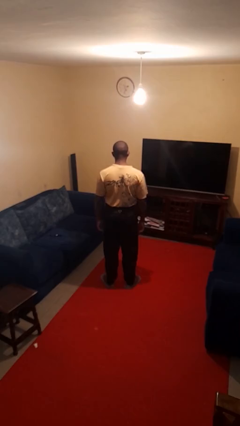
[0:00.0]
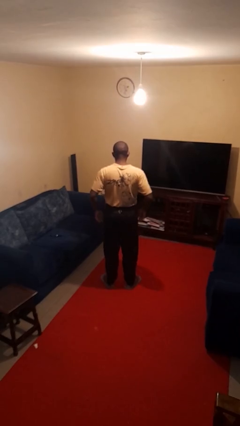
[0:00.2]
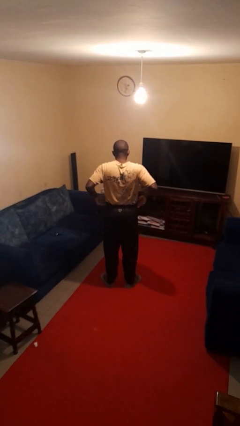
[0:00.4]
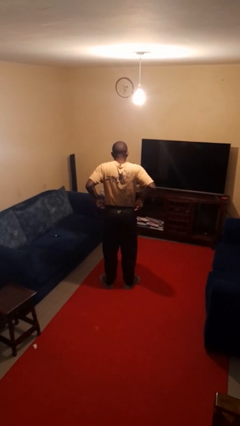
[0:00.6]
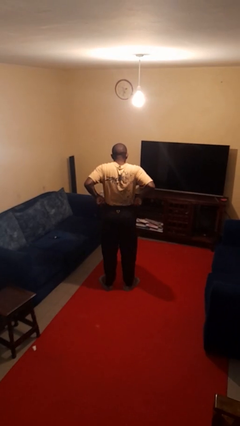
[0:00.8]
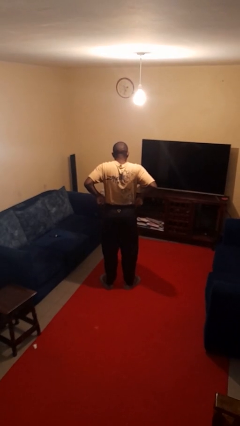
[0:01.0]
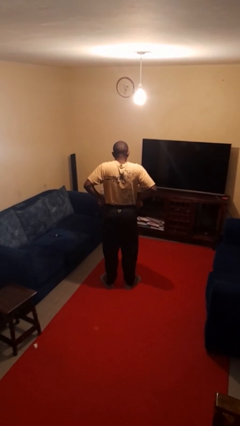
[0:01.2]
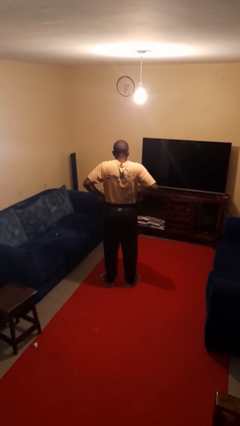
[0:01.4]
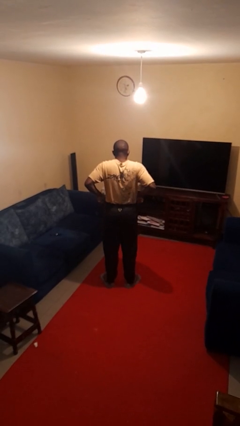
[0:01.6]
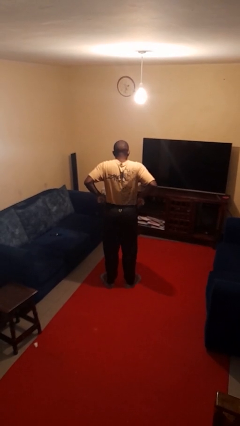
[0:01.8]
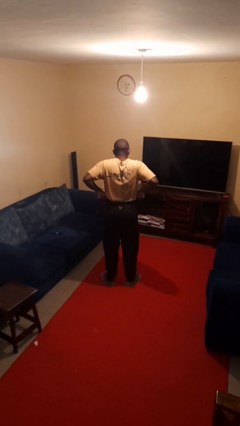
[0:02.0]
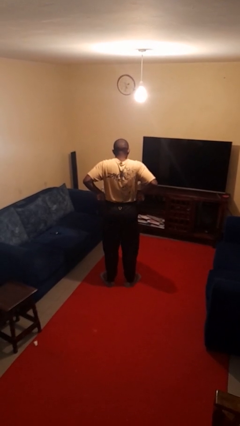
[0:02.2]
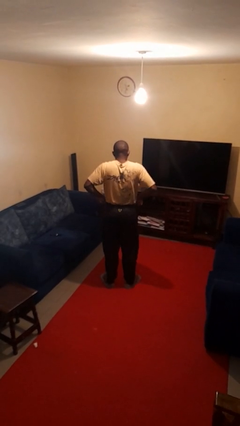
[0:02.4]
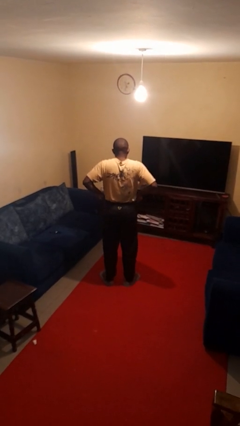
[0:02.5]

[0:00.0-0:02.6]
person hikes up pants

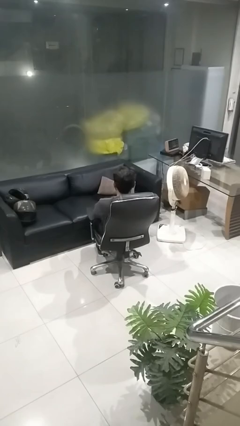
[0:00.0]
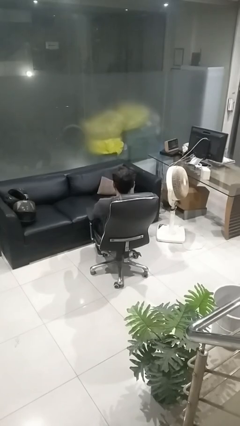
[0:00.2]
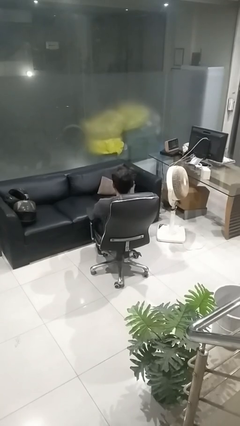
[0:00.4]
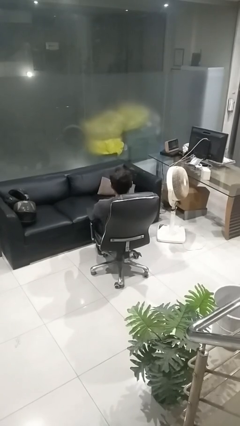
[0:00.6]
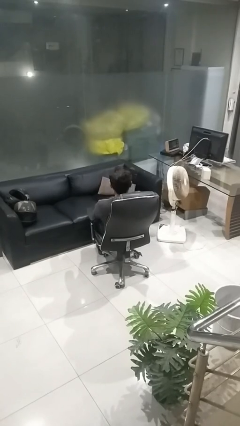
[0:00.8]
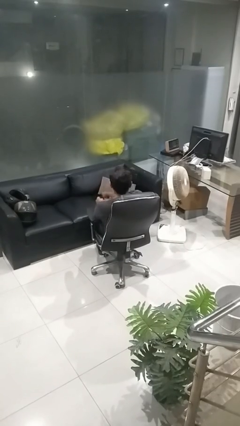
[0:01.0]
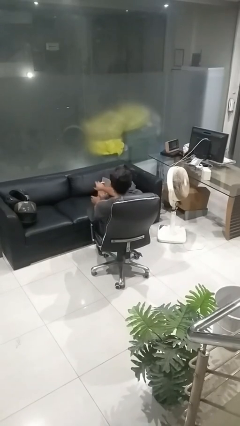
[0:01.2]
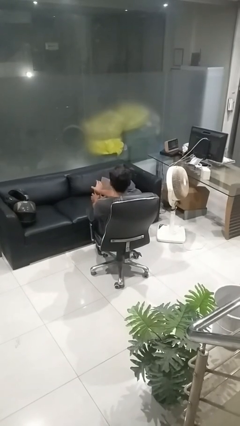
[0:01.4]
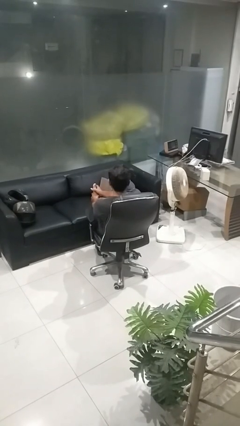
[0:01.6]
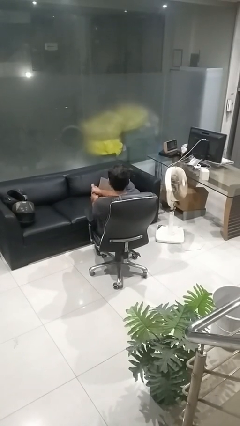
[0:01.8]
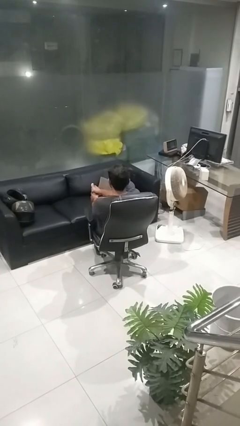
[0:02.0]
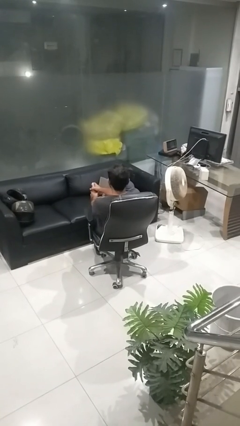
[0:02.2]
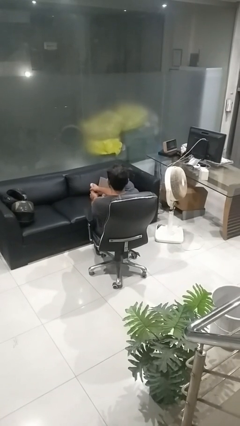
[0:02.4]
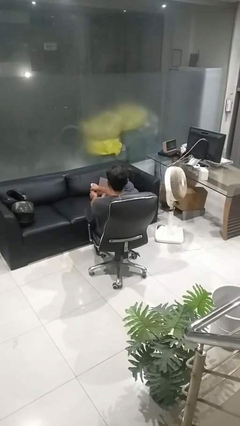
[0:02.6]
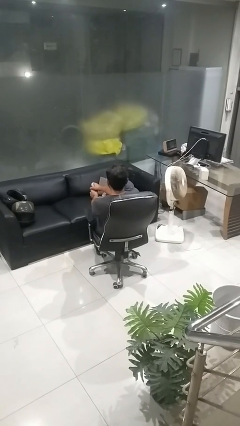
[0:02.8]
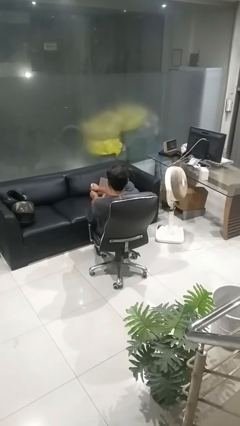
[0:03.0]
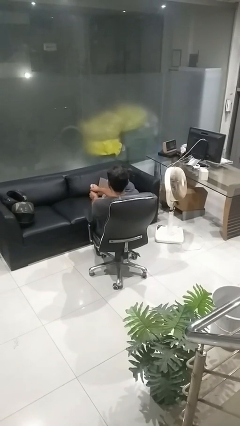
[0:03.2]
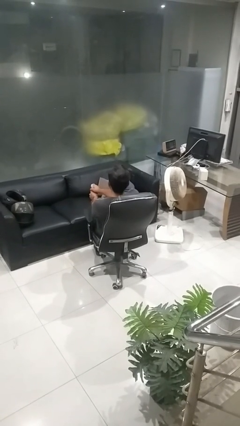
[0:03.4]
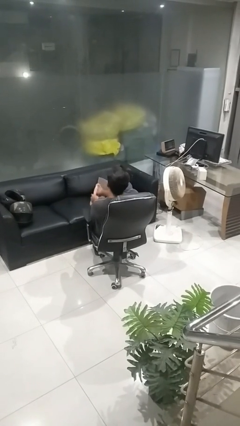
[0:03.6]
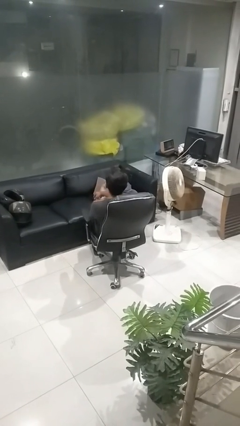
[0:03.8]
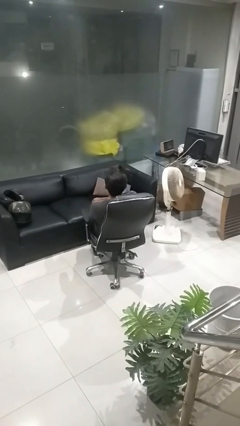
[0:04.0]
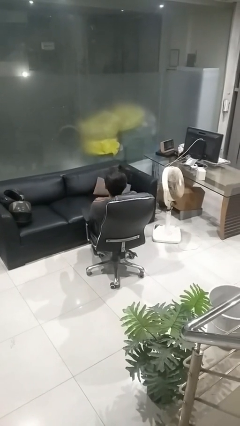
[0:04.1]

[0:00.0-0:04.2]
person rubs foot

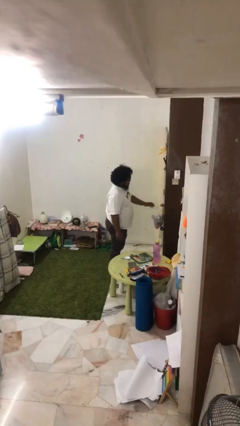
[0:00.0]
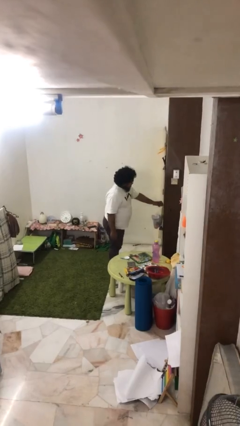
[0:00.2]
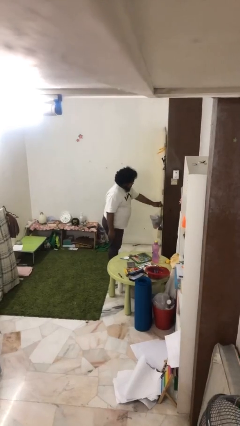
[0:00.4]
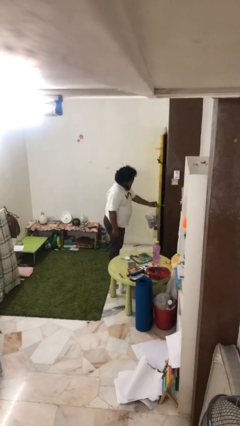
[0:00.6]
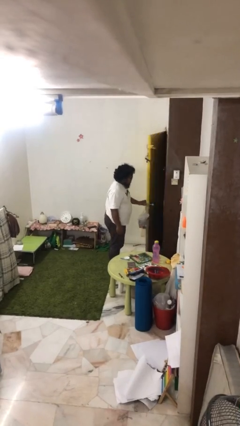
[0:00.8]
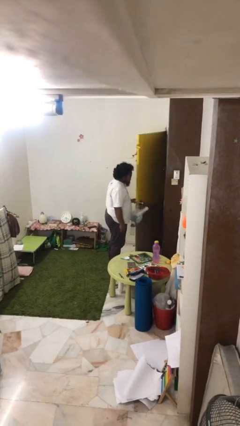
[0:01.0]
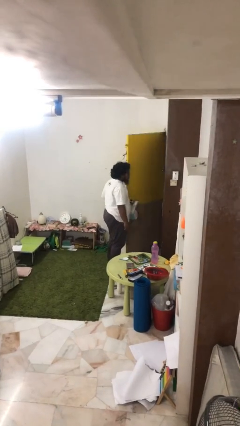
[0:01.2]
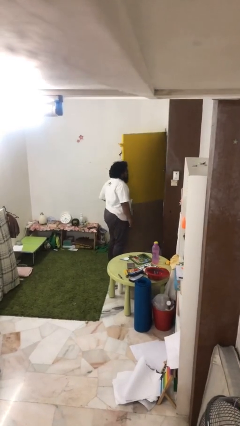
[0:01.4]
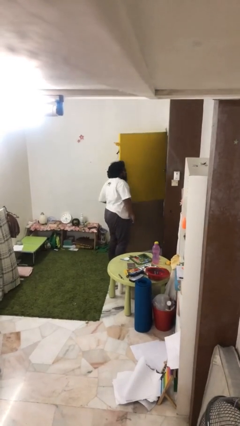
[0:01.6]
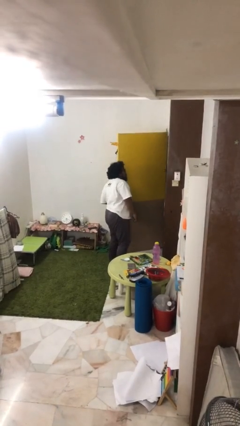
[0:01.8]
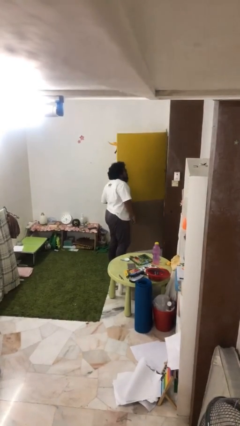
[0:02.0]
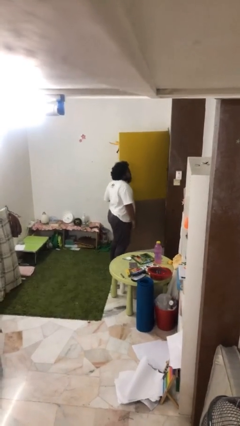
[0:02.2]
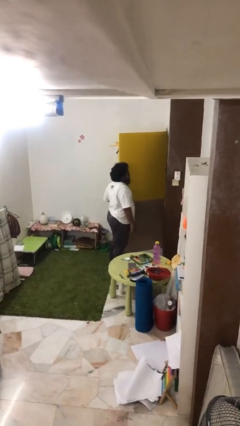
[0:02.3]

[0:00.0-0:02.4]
person opens facility door

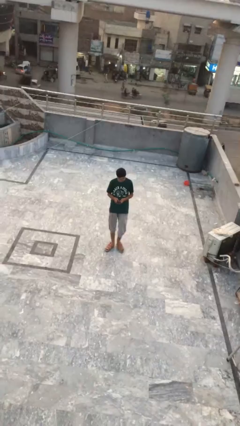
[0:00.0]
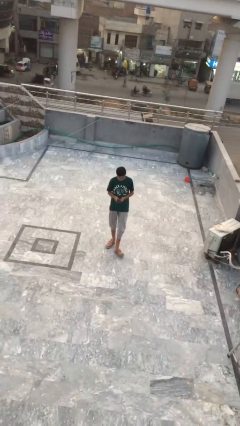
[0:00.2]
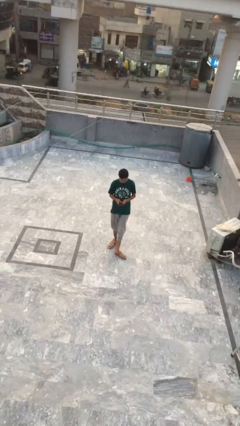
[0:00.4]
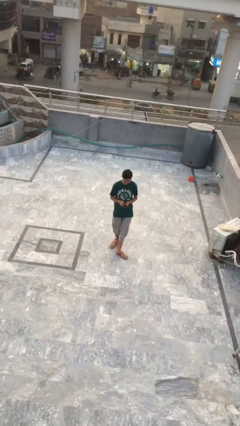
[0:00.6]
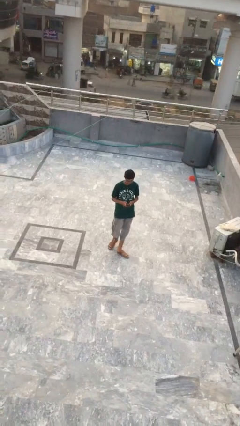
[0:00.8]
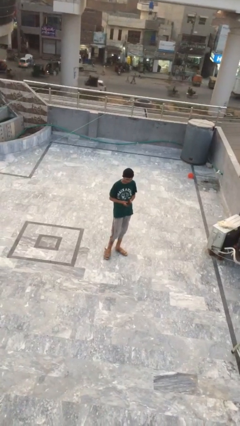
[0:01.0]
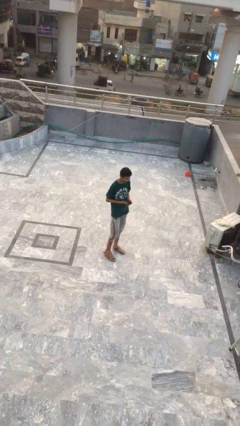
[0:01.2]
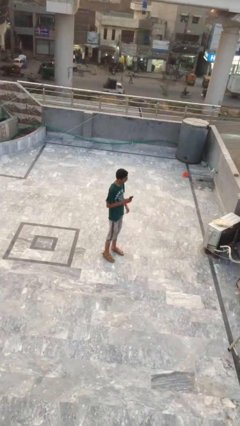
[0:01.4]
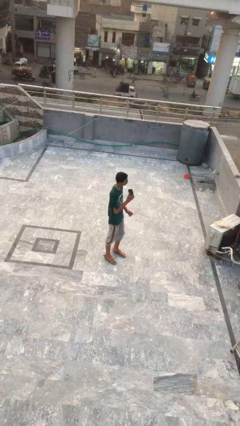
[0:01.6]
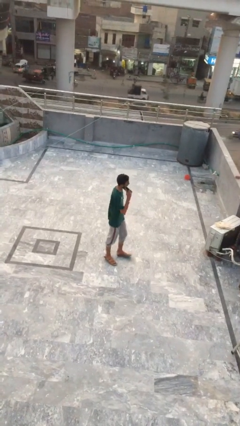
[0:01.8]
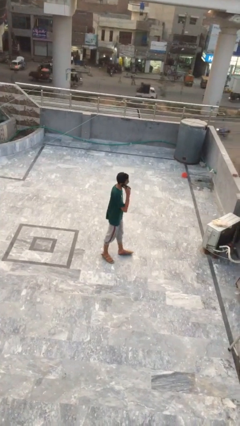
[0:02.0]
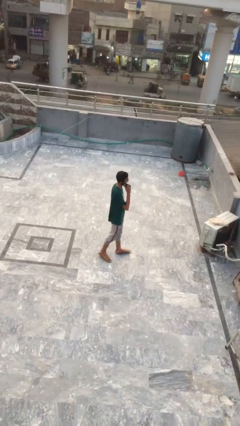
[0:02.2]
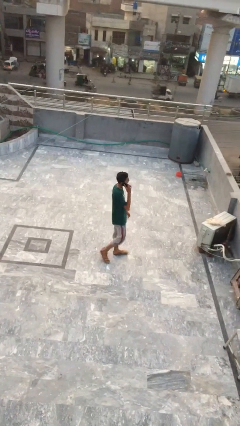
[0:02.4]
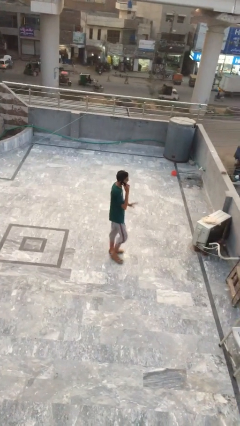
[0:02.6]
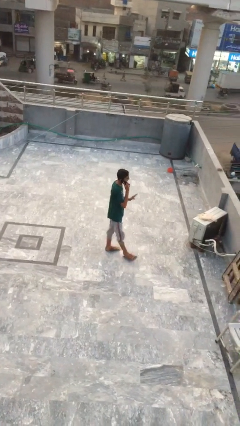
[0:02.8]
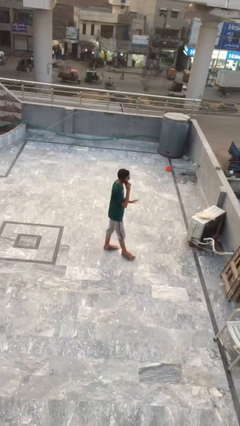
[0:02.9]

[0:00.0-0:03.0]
person talks on phone

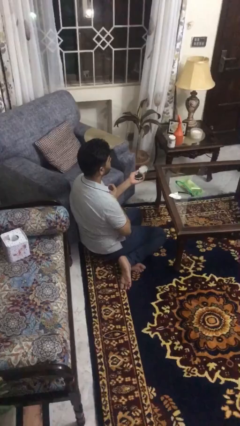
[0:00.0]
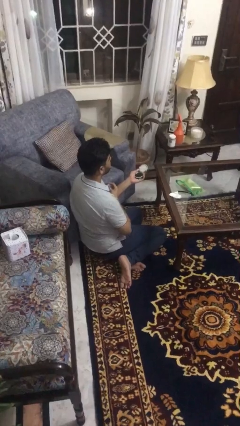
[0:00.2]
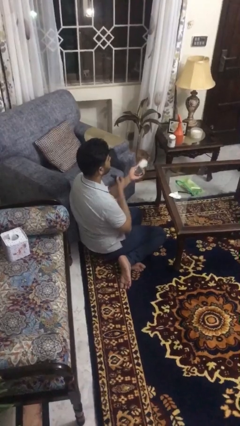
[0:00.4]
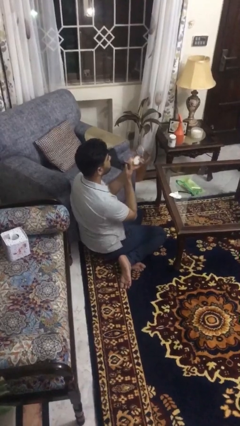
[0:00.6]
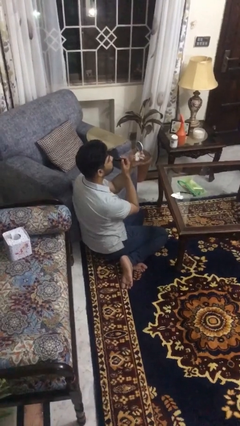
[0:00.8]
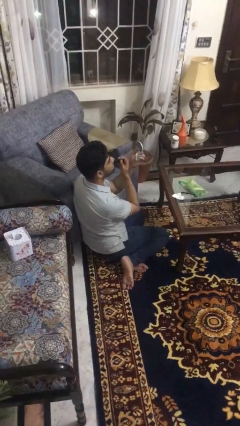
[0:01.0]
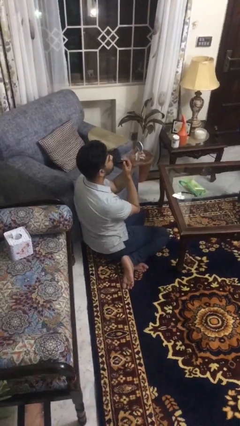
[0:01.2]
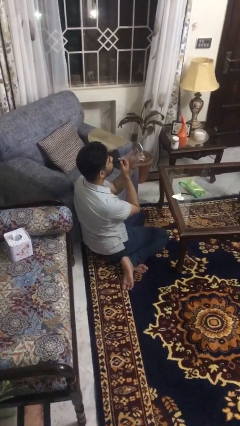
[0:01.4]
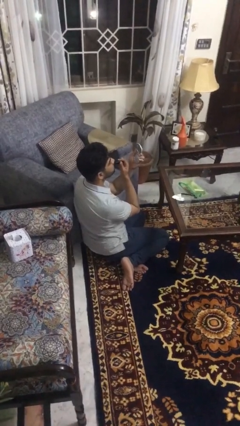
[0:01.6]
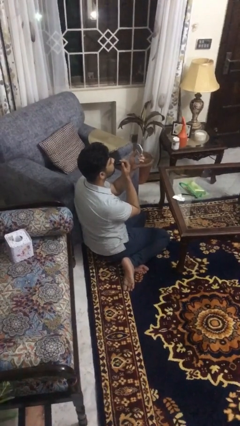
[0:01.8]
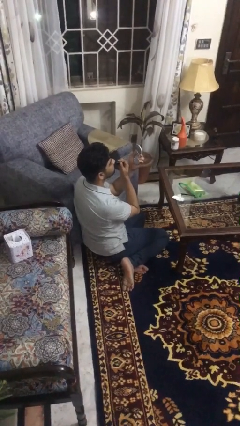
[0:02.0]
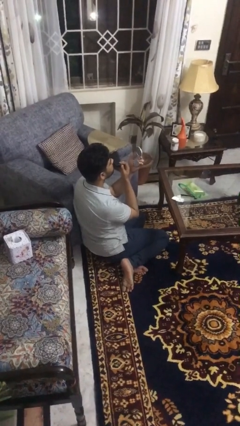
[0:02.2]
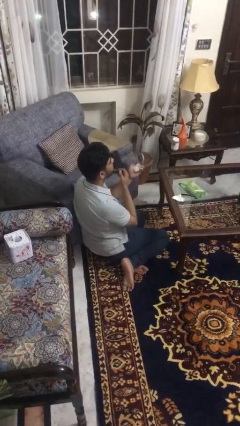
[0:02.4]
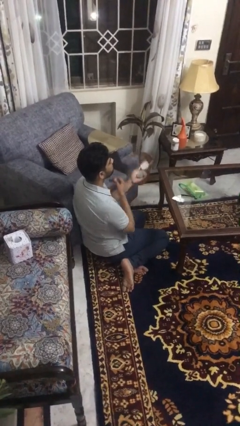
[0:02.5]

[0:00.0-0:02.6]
person applies lip makeup

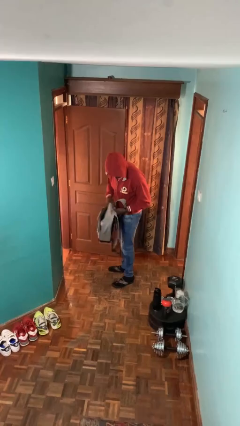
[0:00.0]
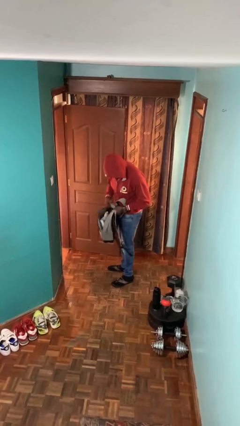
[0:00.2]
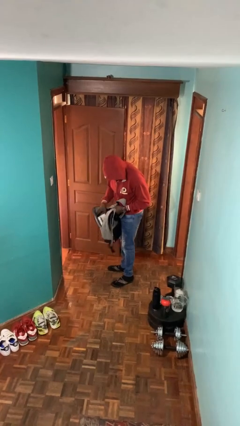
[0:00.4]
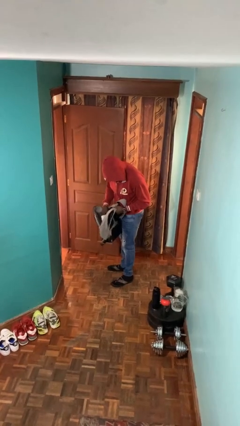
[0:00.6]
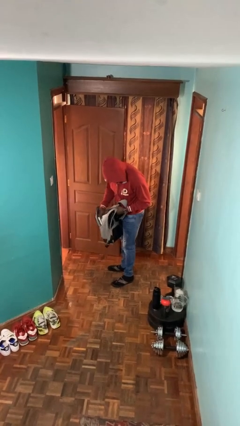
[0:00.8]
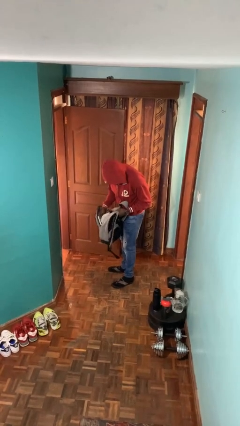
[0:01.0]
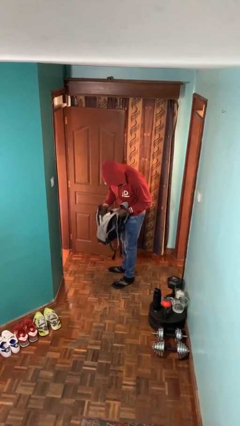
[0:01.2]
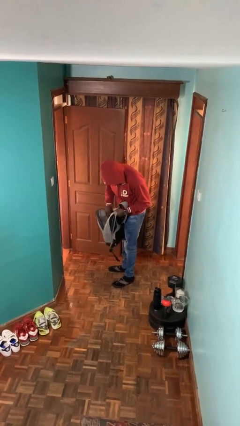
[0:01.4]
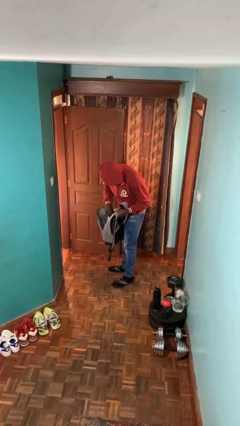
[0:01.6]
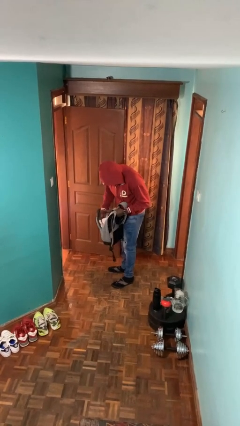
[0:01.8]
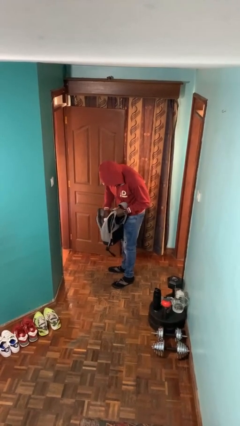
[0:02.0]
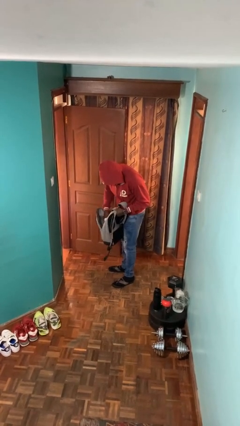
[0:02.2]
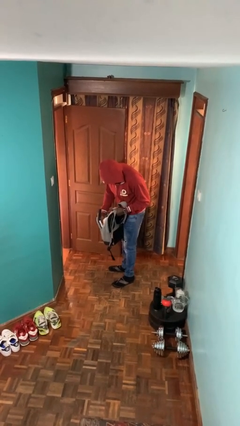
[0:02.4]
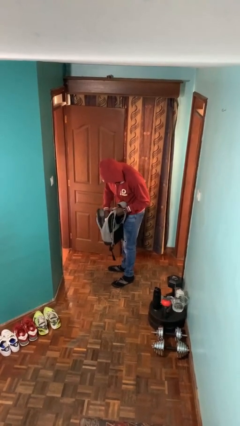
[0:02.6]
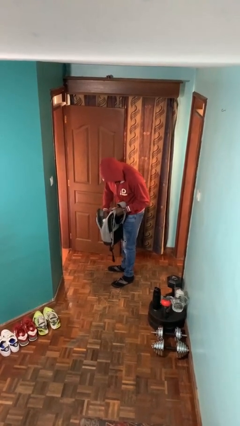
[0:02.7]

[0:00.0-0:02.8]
person searches in backpack

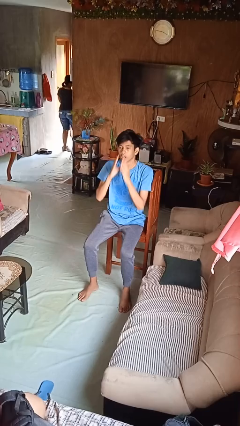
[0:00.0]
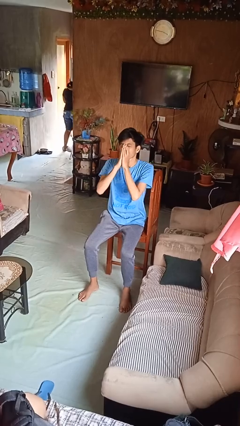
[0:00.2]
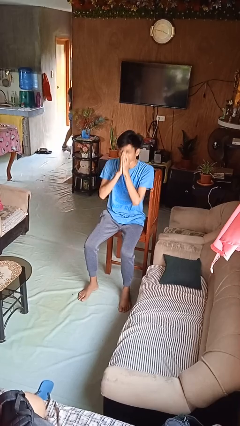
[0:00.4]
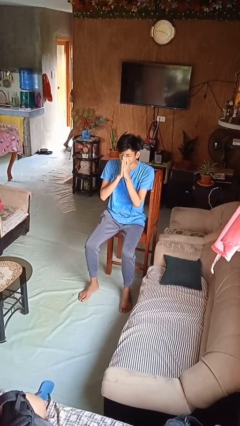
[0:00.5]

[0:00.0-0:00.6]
person sneezes into hand
